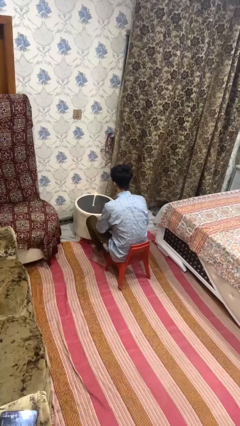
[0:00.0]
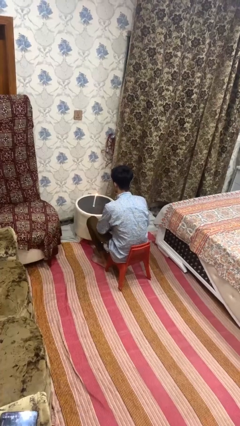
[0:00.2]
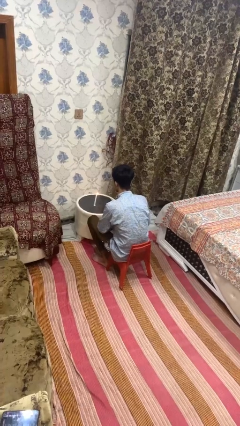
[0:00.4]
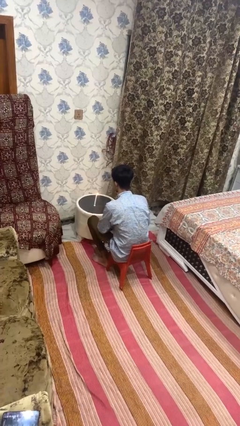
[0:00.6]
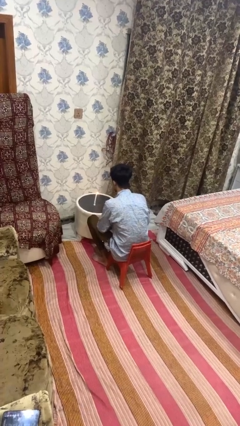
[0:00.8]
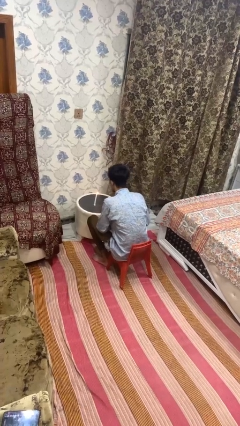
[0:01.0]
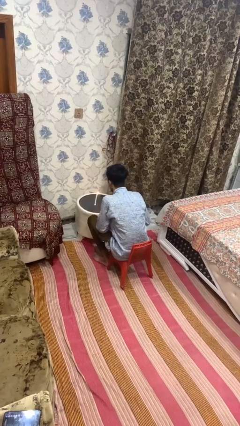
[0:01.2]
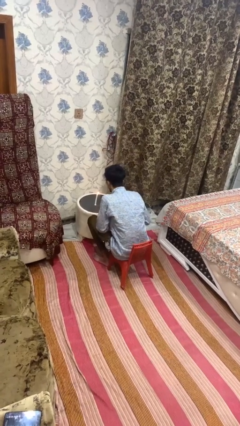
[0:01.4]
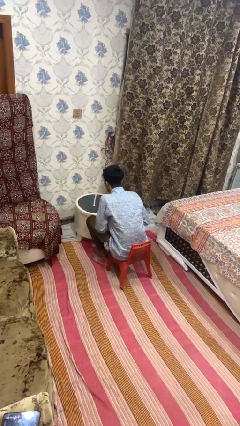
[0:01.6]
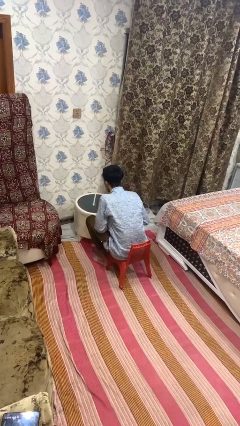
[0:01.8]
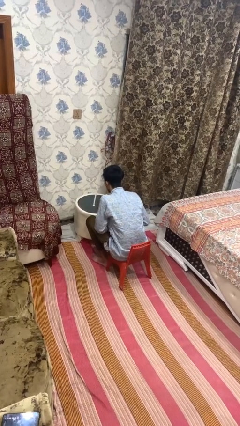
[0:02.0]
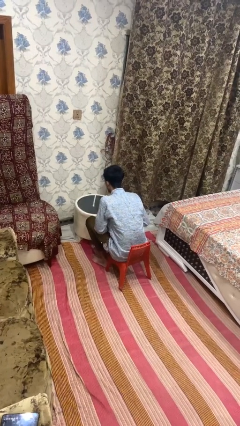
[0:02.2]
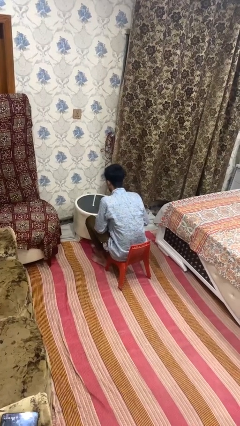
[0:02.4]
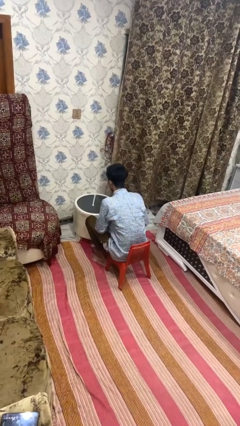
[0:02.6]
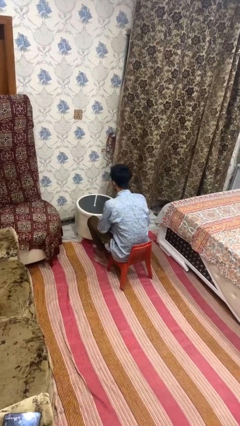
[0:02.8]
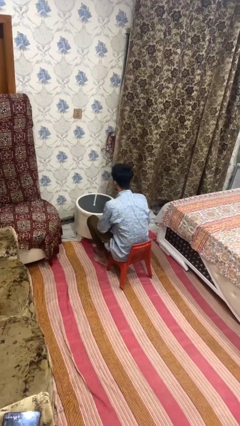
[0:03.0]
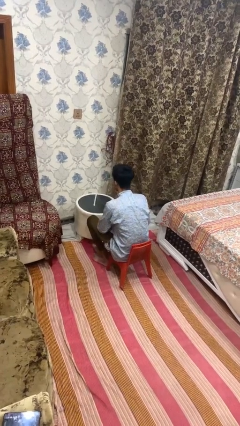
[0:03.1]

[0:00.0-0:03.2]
person extinguishes candle

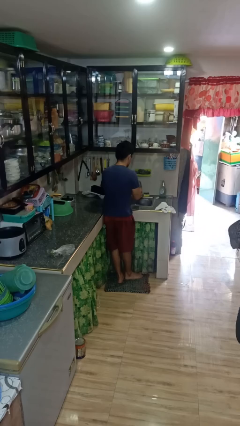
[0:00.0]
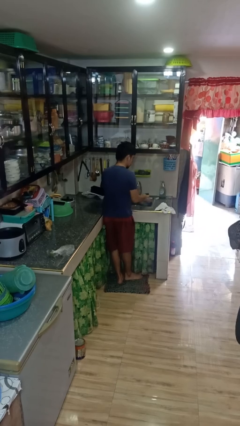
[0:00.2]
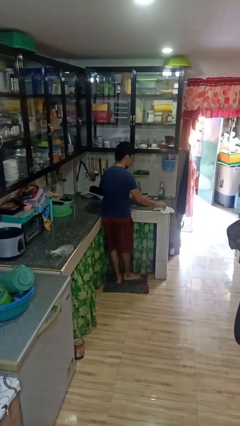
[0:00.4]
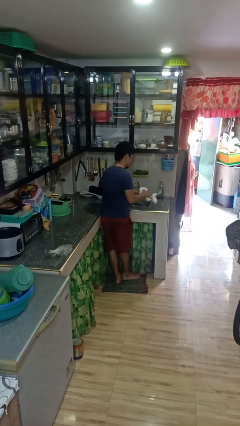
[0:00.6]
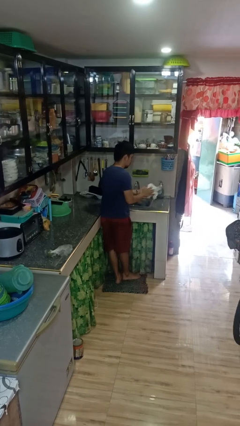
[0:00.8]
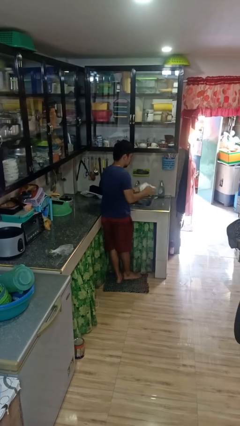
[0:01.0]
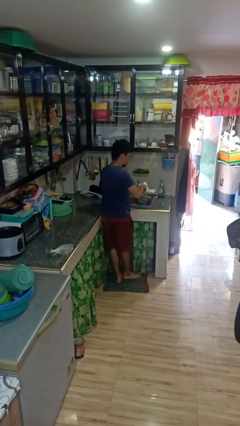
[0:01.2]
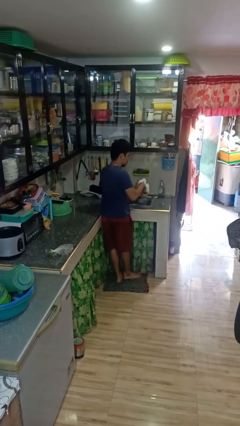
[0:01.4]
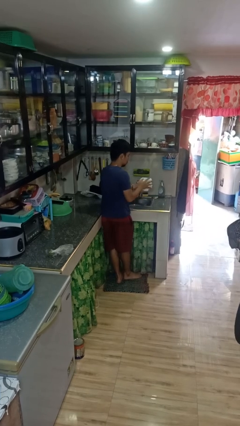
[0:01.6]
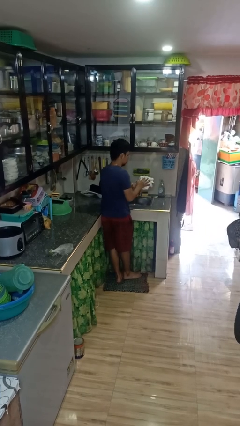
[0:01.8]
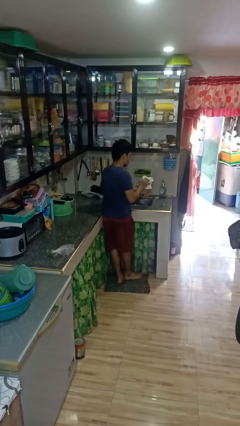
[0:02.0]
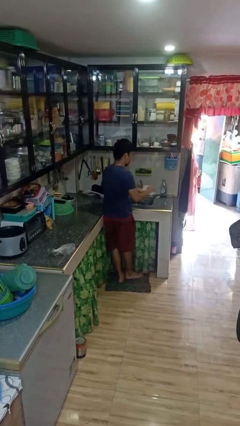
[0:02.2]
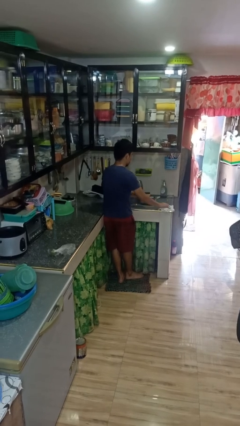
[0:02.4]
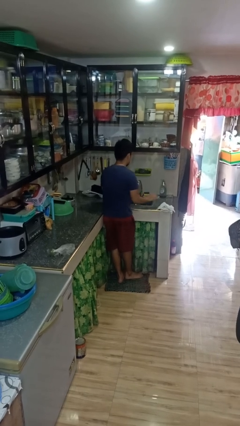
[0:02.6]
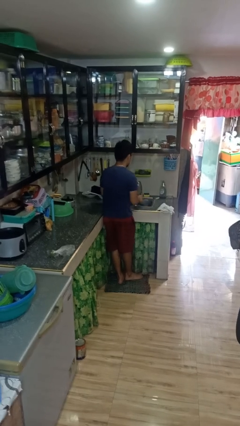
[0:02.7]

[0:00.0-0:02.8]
person dries hands with towel

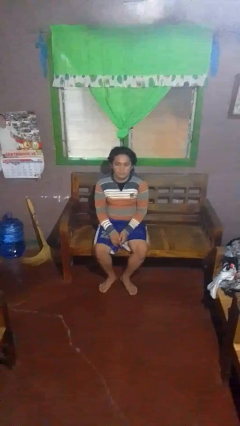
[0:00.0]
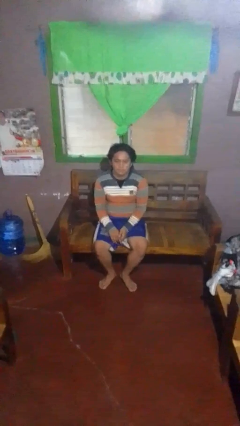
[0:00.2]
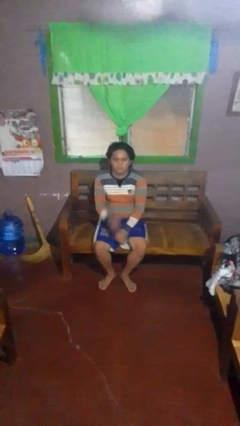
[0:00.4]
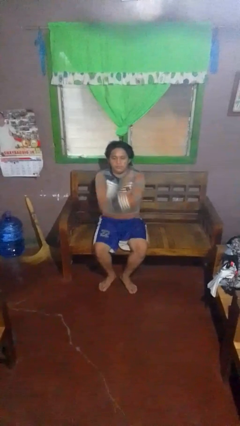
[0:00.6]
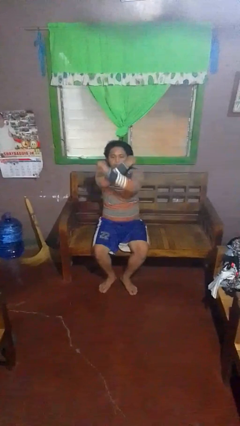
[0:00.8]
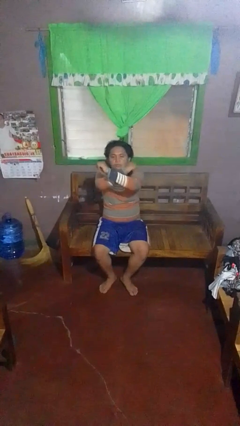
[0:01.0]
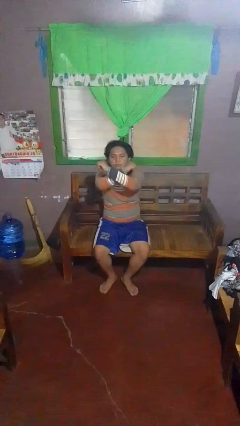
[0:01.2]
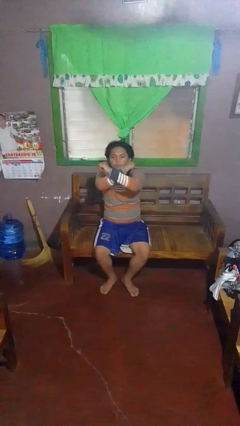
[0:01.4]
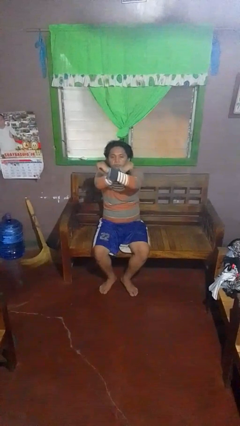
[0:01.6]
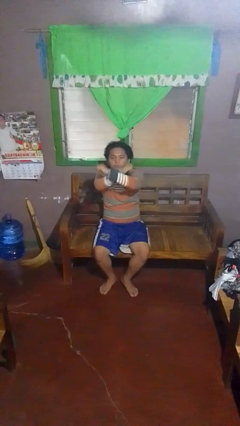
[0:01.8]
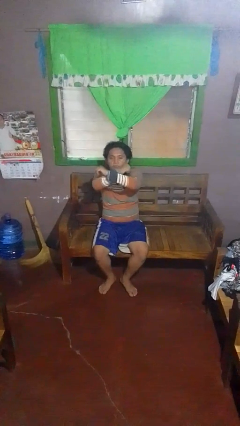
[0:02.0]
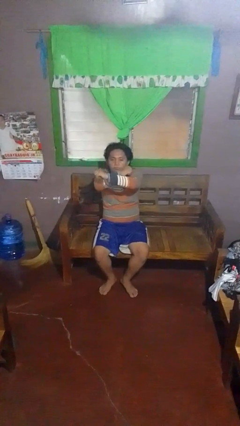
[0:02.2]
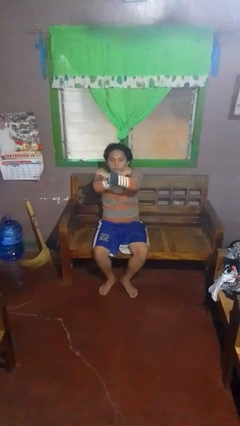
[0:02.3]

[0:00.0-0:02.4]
person gestures arms x

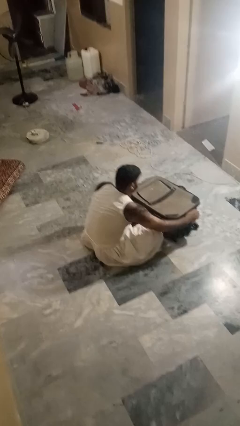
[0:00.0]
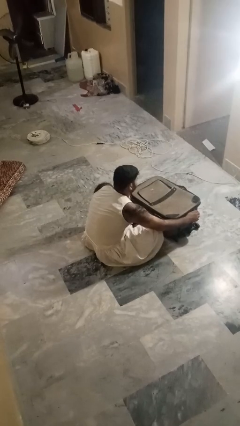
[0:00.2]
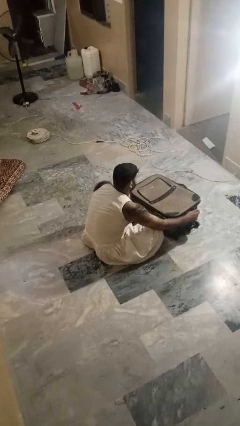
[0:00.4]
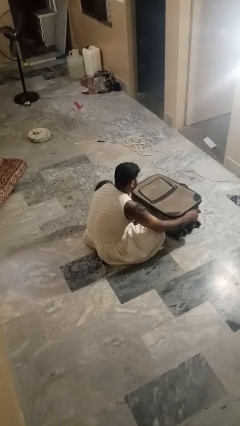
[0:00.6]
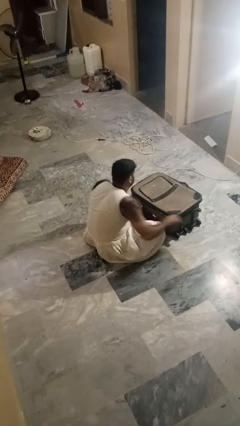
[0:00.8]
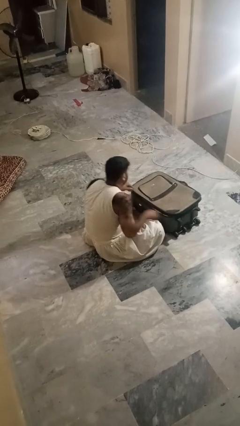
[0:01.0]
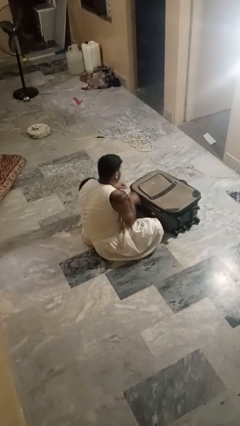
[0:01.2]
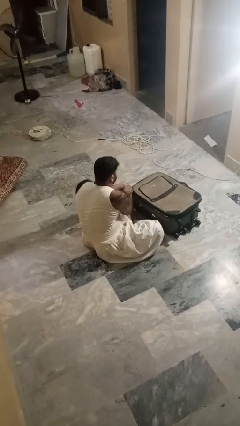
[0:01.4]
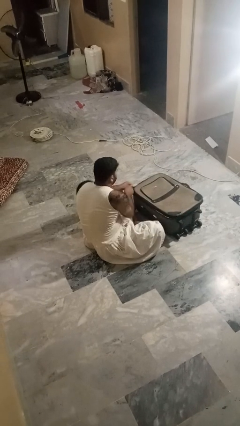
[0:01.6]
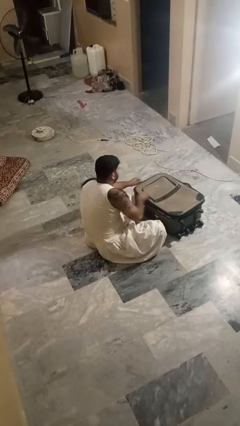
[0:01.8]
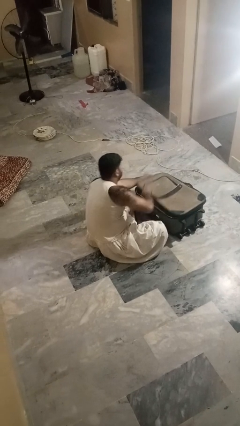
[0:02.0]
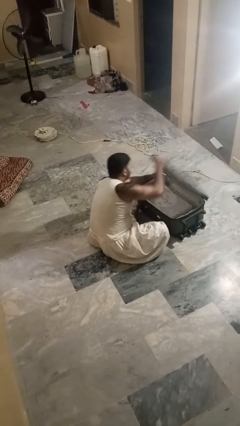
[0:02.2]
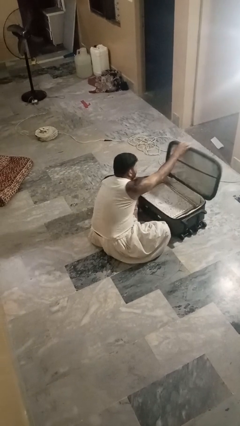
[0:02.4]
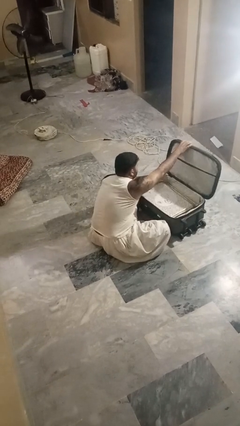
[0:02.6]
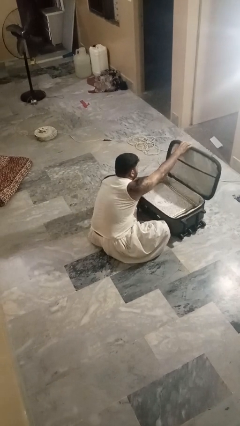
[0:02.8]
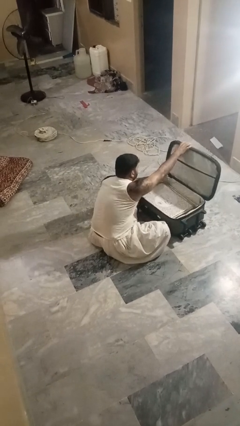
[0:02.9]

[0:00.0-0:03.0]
person opens suitcase

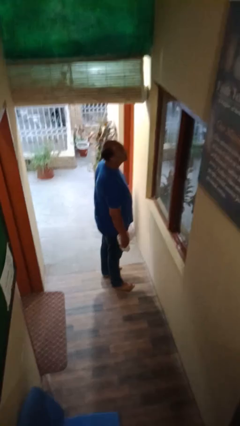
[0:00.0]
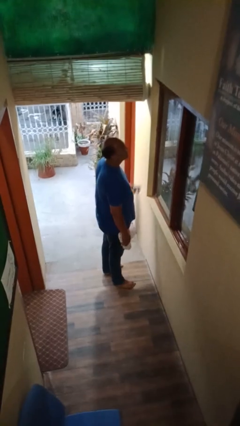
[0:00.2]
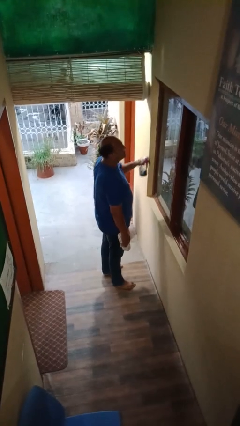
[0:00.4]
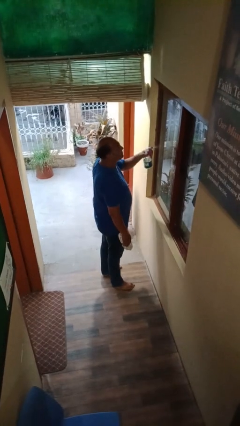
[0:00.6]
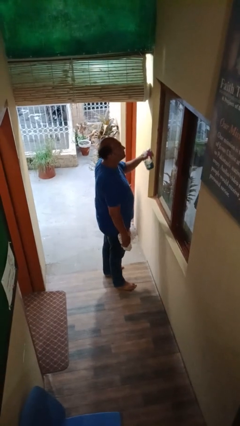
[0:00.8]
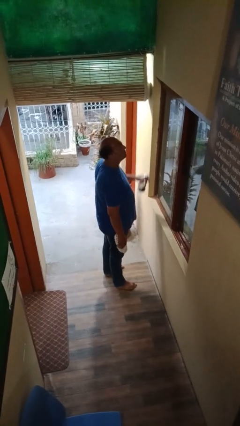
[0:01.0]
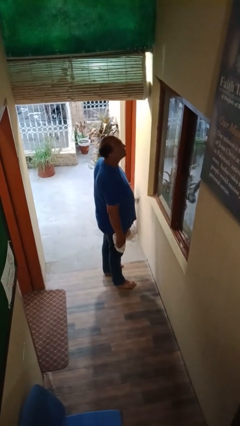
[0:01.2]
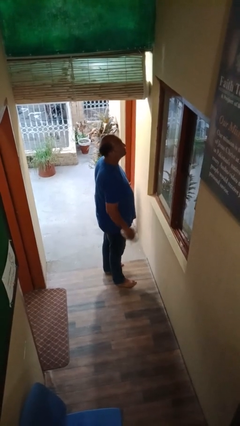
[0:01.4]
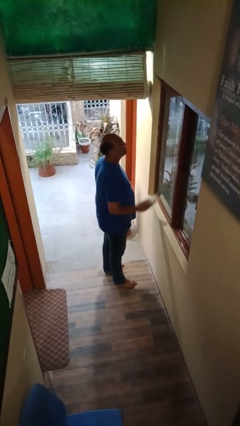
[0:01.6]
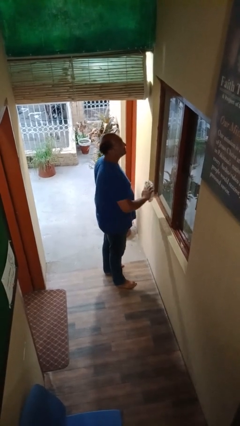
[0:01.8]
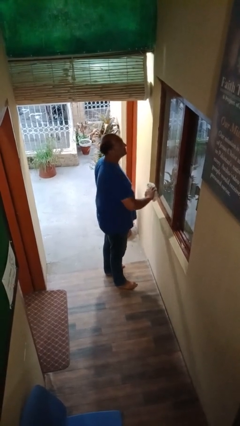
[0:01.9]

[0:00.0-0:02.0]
person sprays from bottle

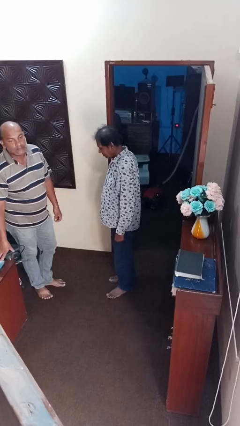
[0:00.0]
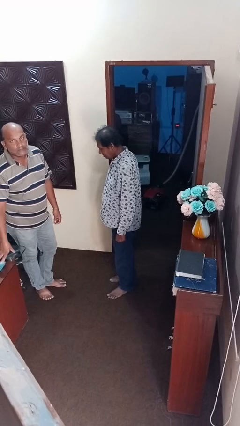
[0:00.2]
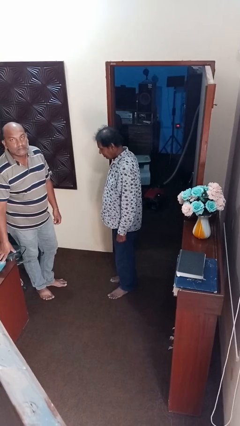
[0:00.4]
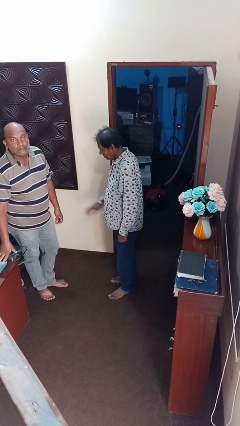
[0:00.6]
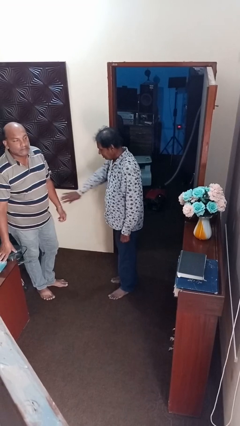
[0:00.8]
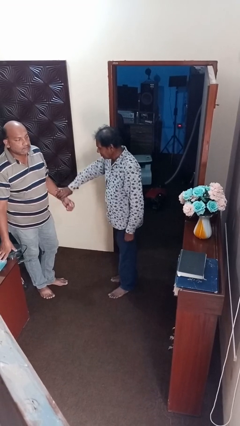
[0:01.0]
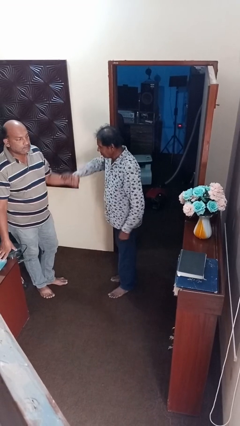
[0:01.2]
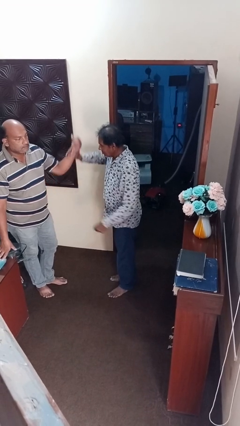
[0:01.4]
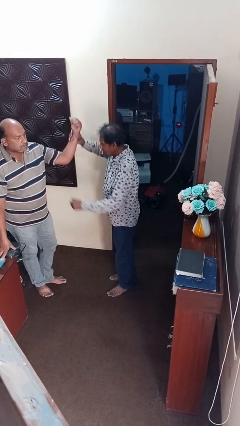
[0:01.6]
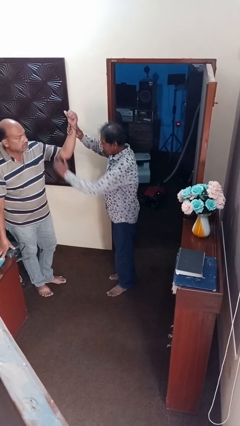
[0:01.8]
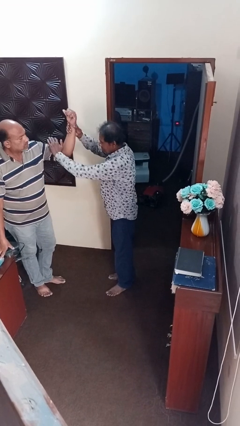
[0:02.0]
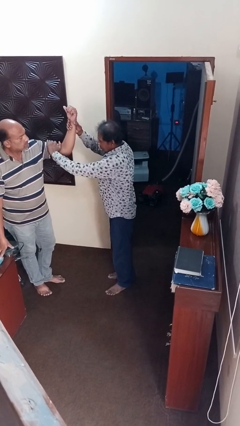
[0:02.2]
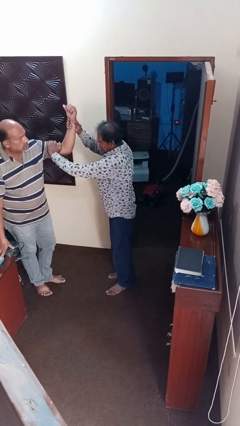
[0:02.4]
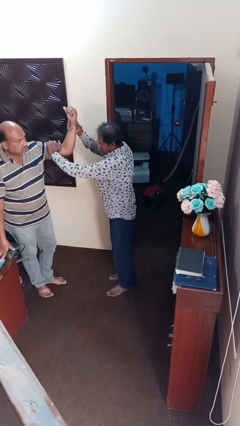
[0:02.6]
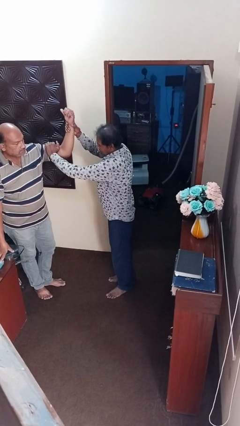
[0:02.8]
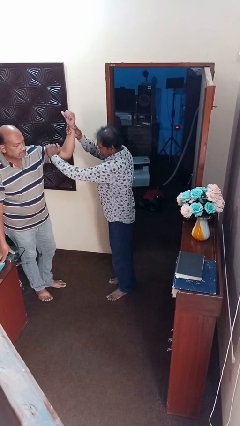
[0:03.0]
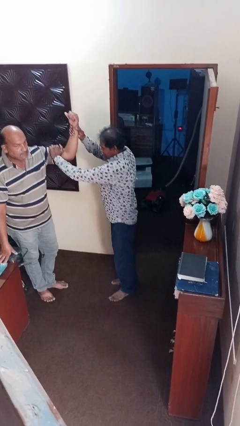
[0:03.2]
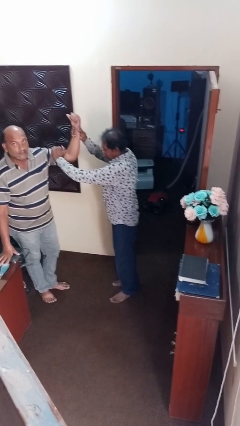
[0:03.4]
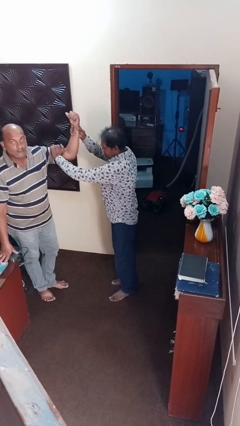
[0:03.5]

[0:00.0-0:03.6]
person grabs person by bicep
